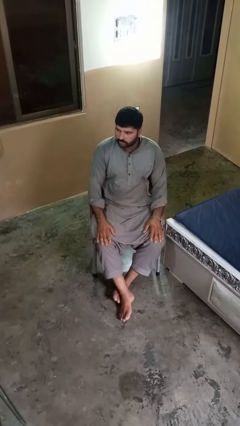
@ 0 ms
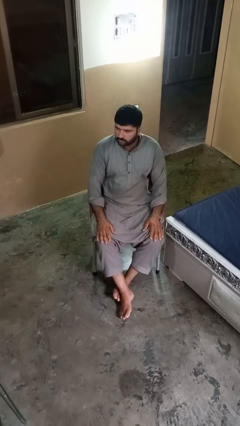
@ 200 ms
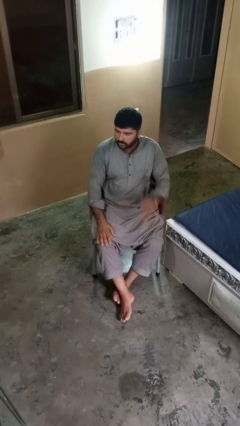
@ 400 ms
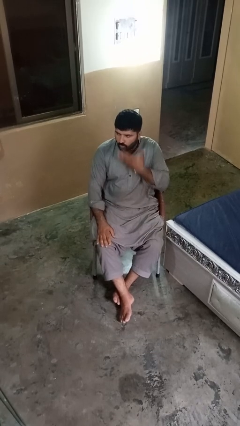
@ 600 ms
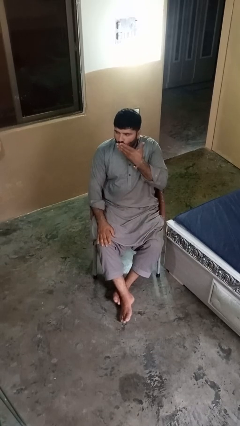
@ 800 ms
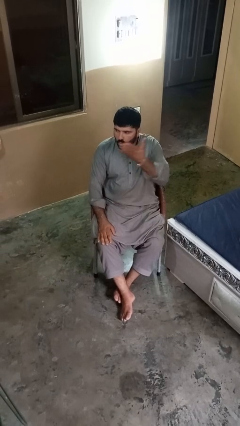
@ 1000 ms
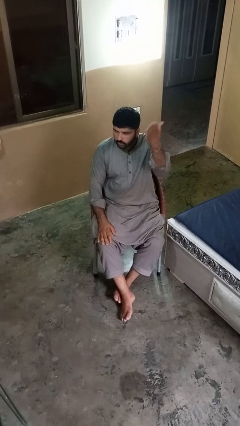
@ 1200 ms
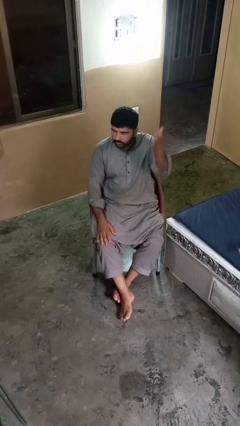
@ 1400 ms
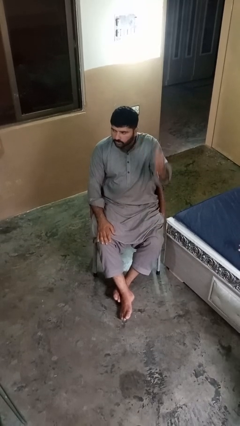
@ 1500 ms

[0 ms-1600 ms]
person gestures blow kiss

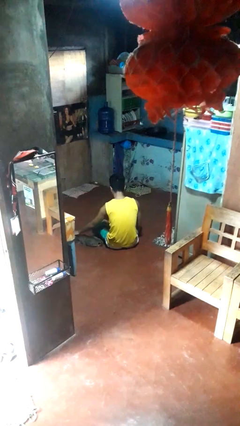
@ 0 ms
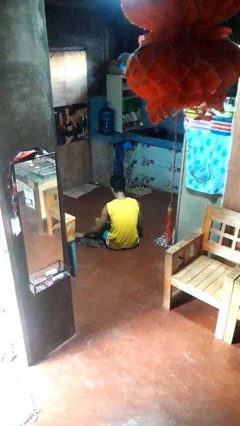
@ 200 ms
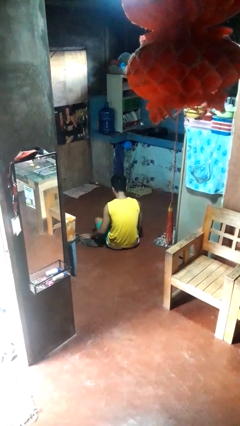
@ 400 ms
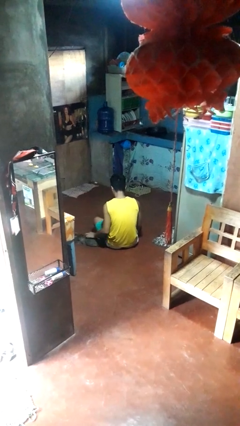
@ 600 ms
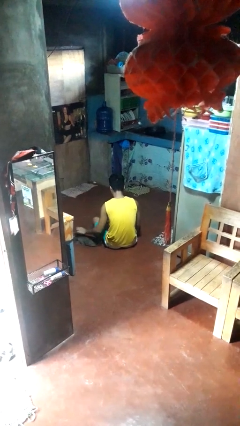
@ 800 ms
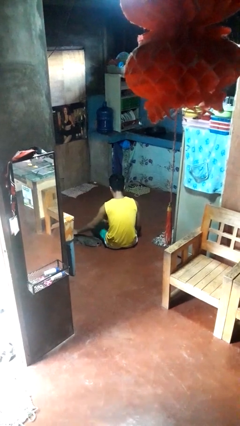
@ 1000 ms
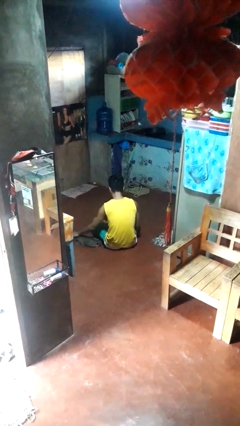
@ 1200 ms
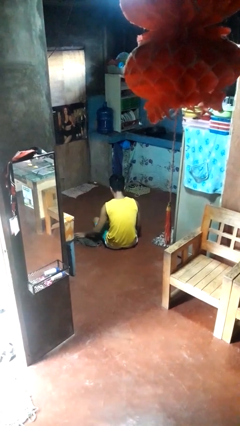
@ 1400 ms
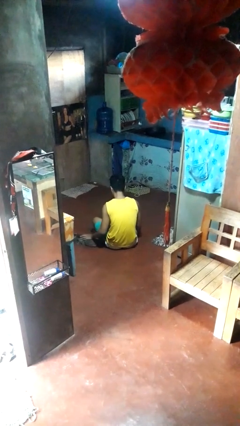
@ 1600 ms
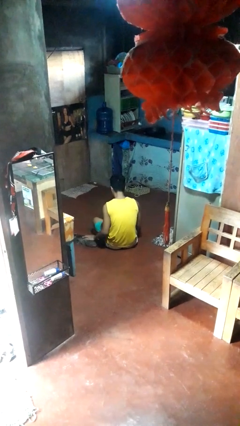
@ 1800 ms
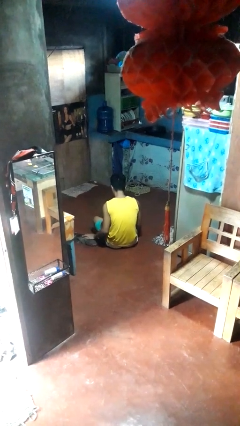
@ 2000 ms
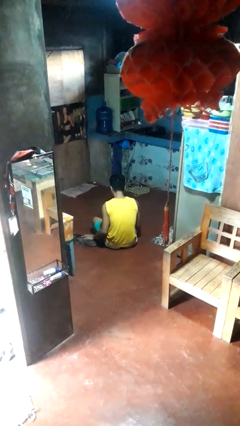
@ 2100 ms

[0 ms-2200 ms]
person pets cat

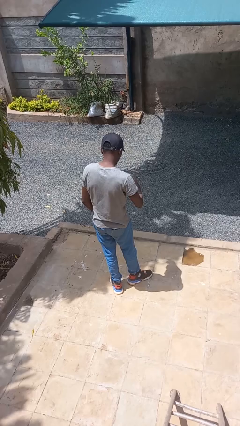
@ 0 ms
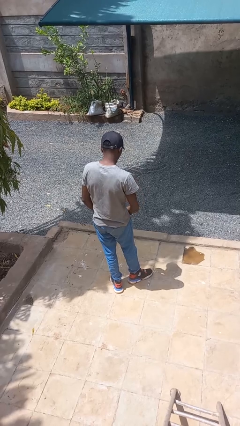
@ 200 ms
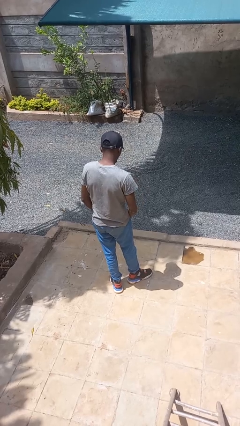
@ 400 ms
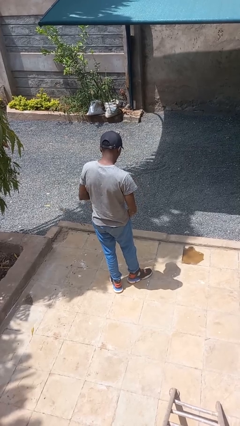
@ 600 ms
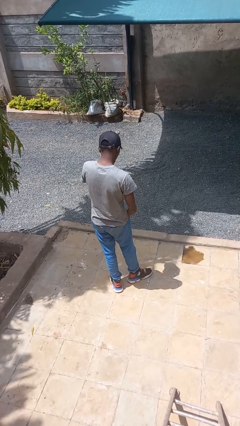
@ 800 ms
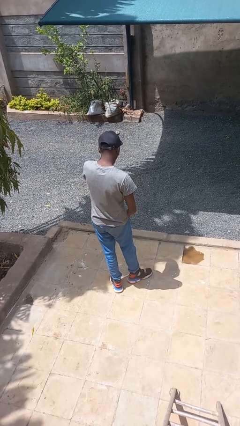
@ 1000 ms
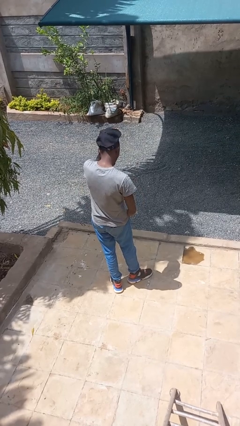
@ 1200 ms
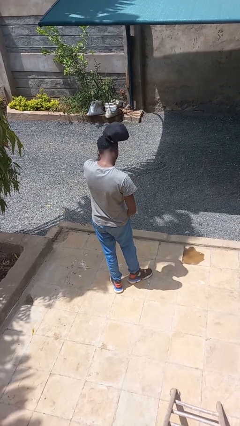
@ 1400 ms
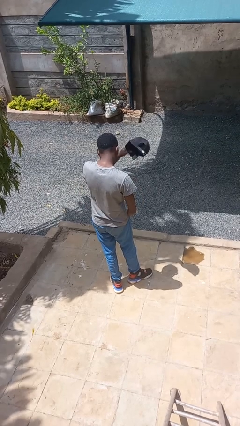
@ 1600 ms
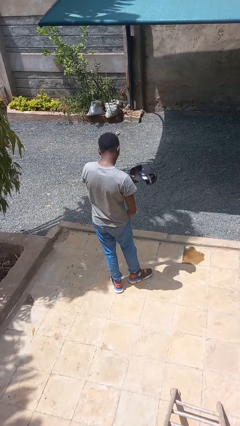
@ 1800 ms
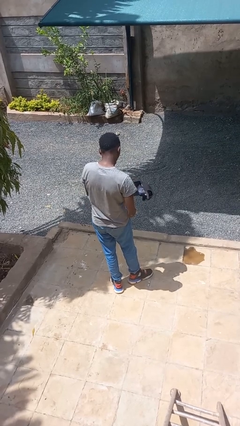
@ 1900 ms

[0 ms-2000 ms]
person takes off hat

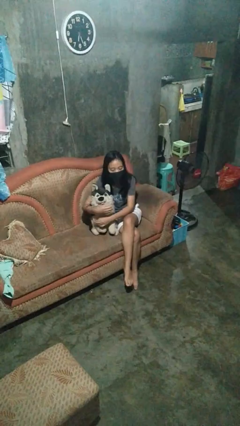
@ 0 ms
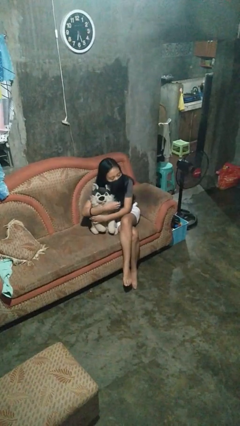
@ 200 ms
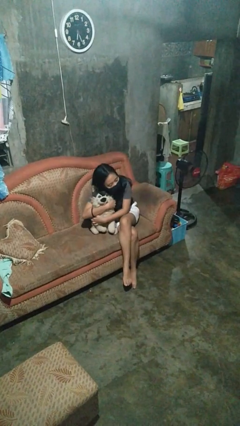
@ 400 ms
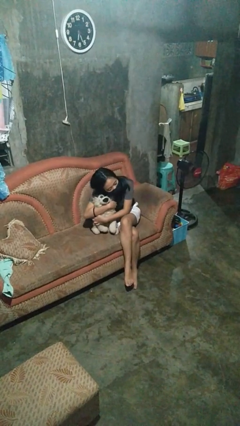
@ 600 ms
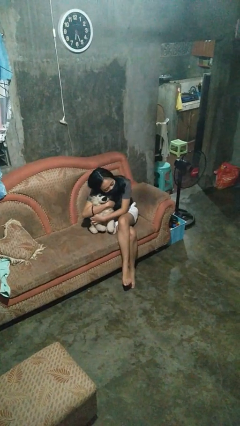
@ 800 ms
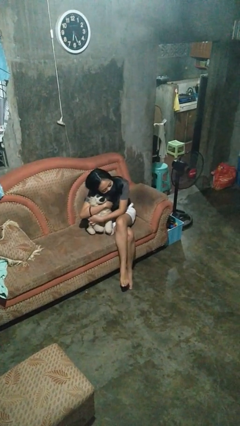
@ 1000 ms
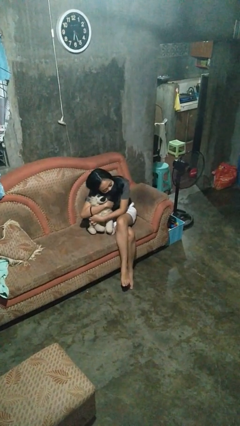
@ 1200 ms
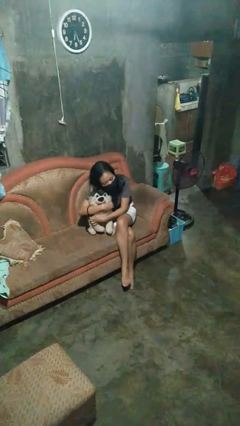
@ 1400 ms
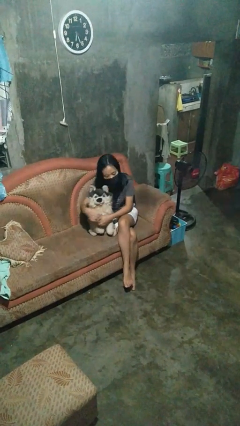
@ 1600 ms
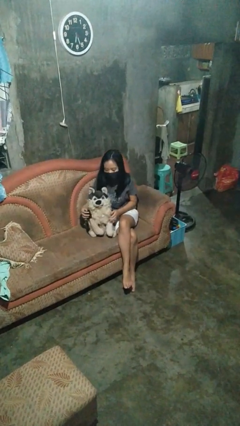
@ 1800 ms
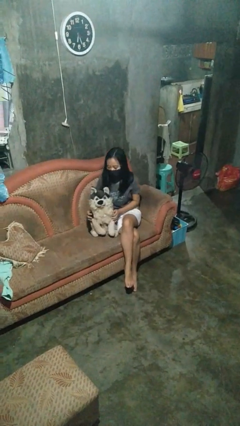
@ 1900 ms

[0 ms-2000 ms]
person hugs stuffed animal

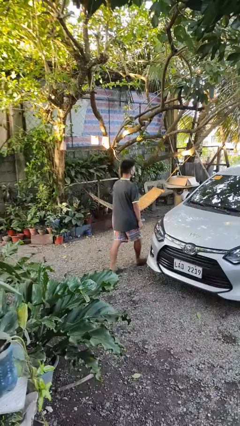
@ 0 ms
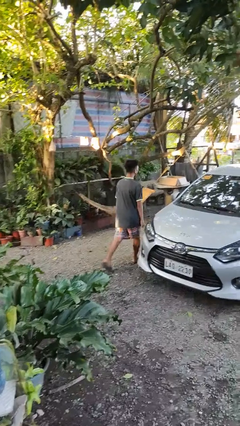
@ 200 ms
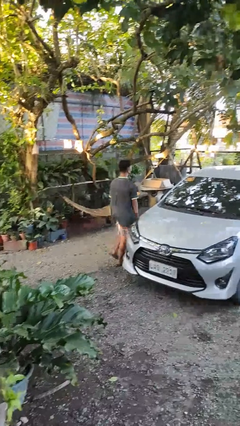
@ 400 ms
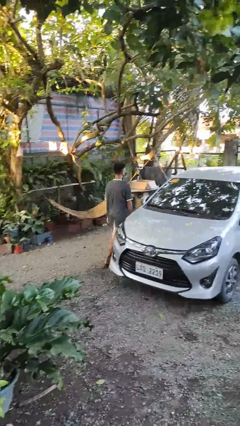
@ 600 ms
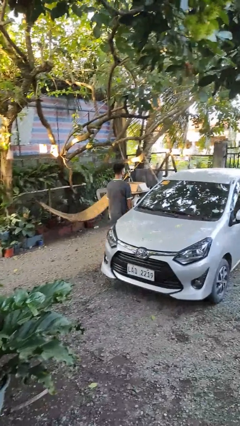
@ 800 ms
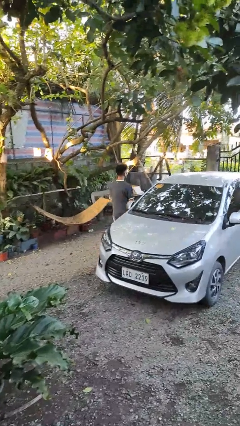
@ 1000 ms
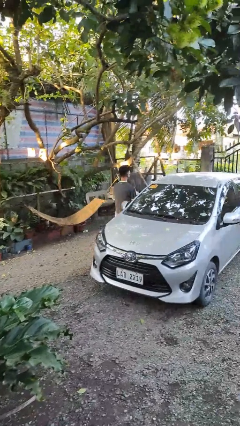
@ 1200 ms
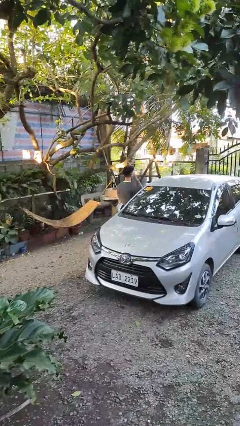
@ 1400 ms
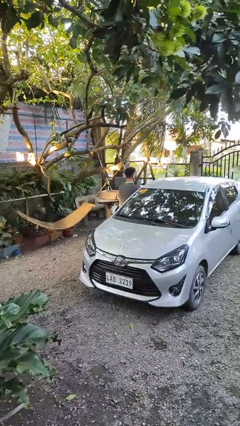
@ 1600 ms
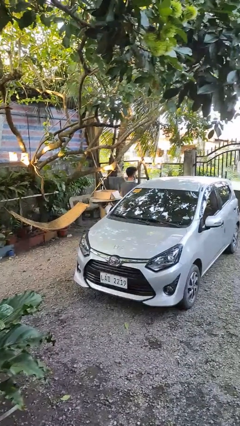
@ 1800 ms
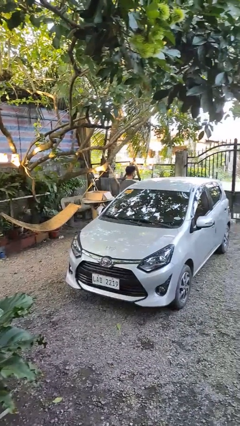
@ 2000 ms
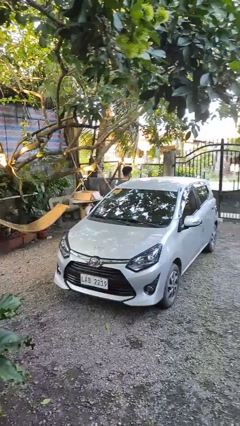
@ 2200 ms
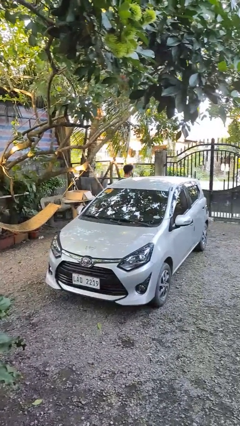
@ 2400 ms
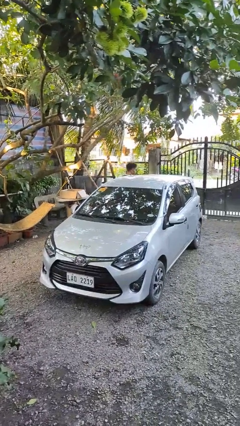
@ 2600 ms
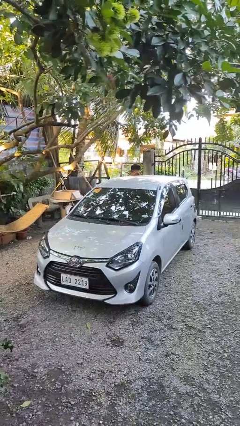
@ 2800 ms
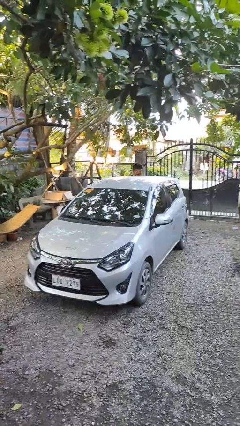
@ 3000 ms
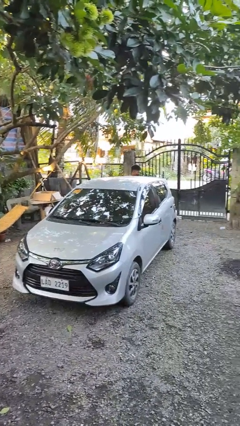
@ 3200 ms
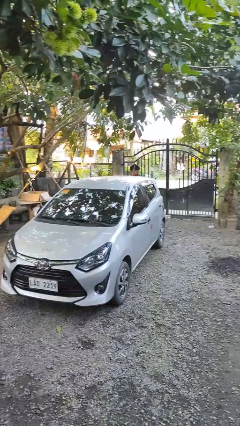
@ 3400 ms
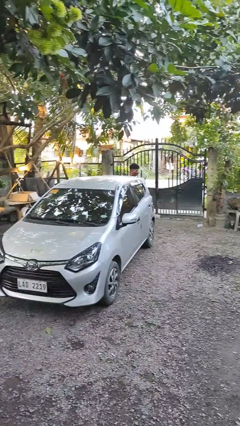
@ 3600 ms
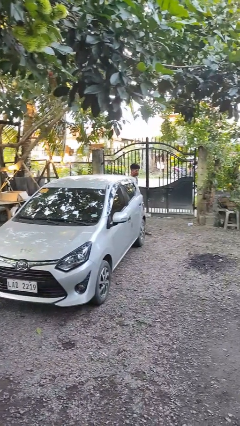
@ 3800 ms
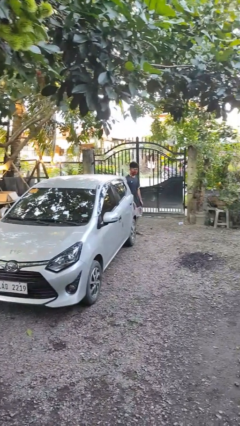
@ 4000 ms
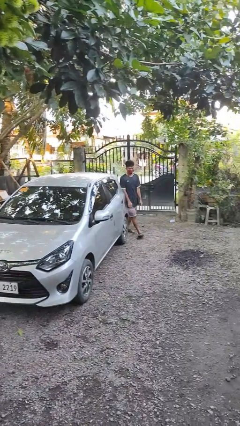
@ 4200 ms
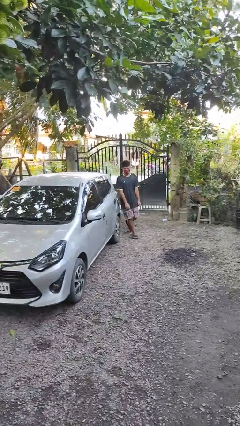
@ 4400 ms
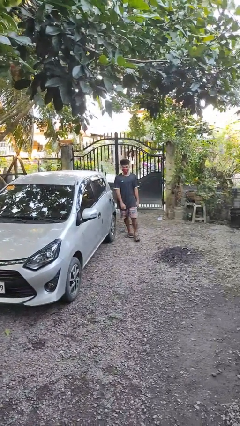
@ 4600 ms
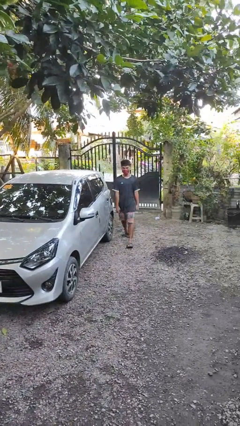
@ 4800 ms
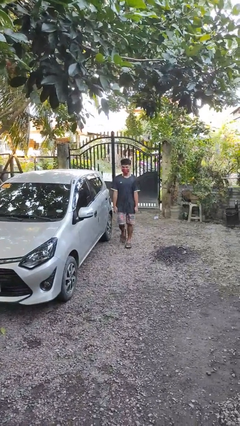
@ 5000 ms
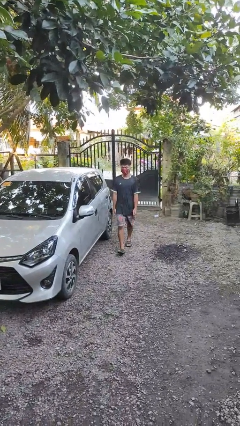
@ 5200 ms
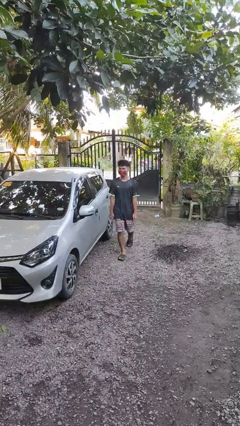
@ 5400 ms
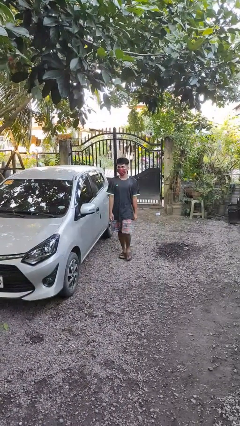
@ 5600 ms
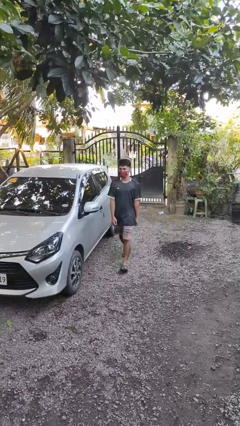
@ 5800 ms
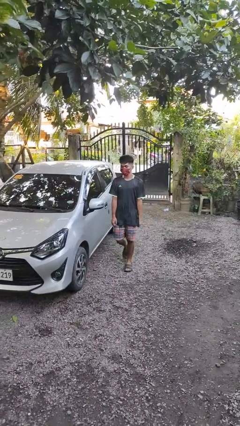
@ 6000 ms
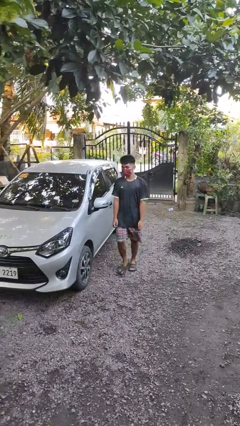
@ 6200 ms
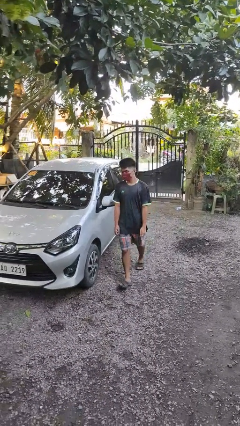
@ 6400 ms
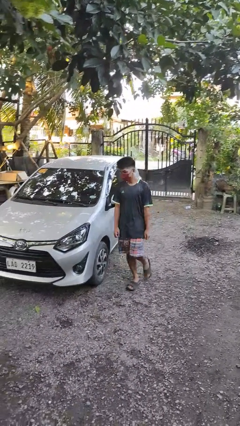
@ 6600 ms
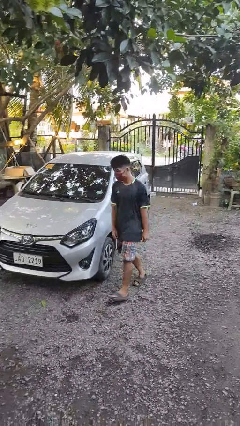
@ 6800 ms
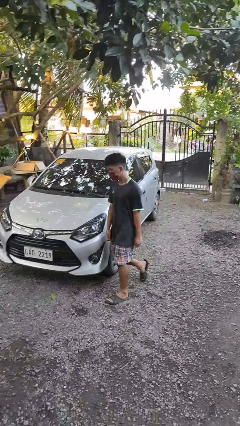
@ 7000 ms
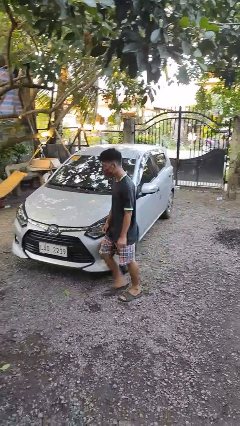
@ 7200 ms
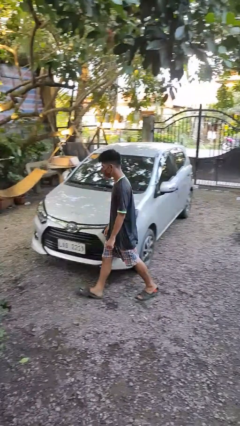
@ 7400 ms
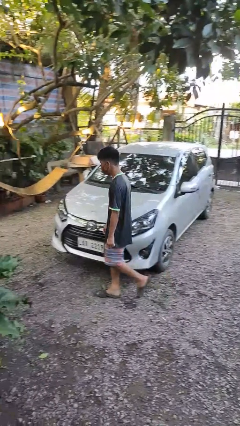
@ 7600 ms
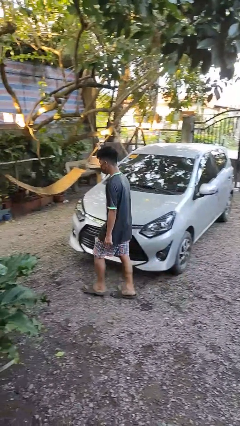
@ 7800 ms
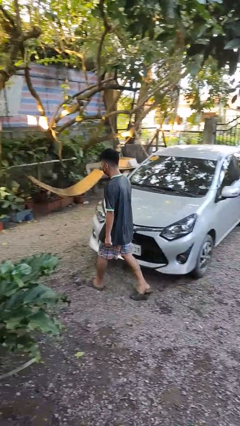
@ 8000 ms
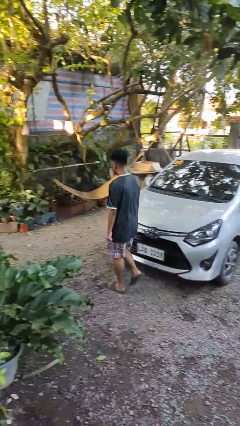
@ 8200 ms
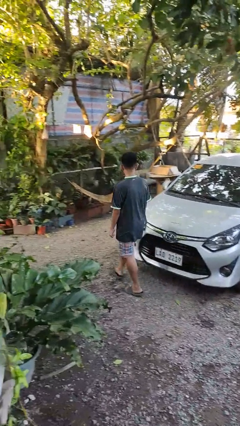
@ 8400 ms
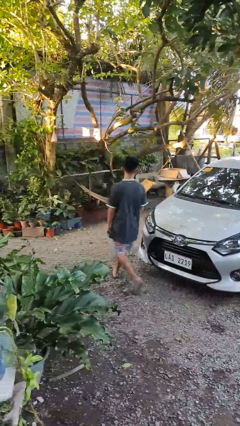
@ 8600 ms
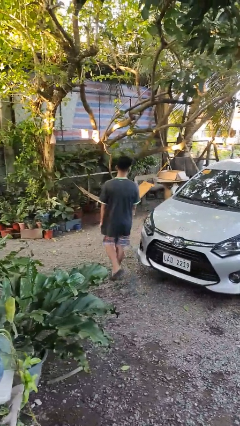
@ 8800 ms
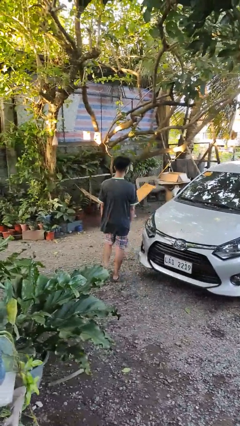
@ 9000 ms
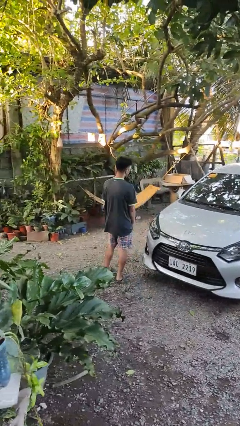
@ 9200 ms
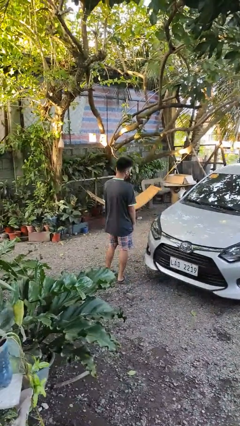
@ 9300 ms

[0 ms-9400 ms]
person walks around car
